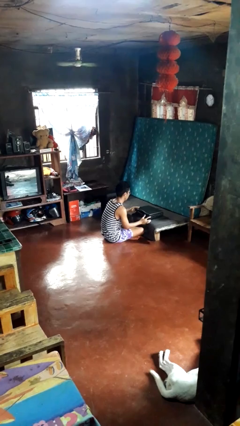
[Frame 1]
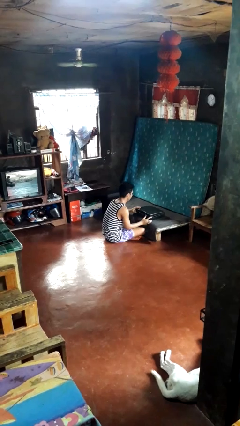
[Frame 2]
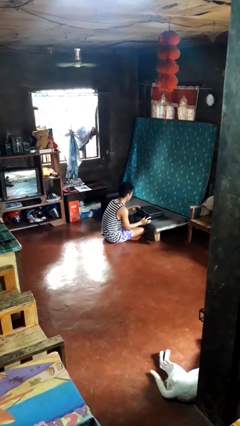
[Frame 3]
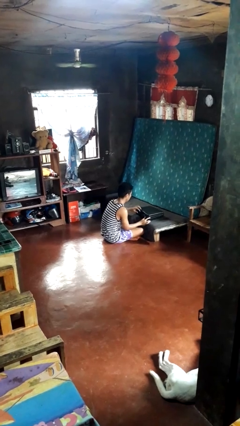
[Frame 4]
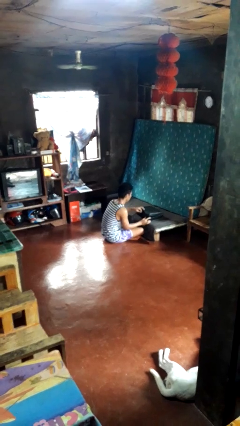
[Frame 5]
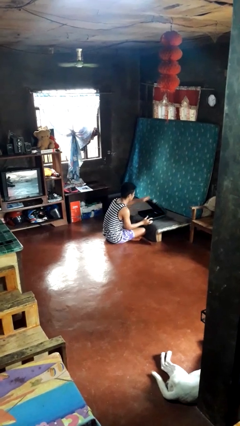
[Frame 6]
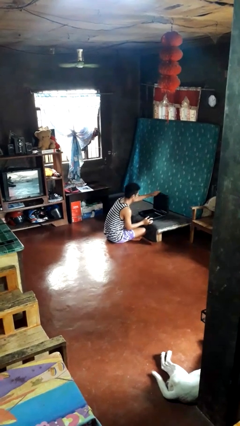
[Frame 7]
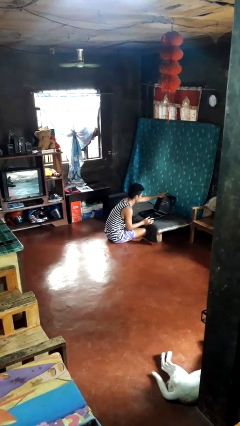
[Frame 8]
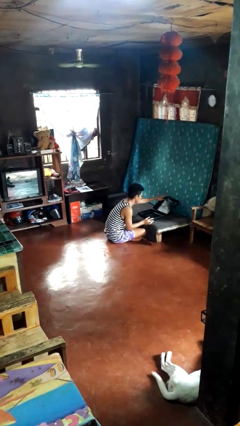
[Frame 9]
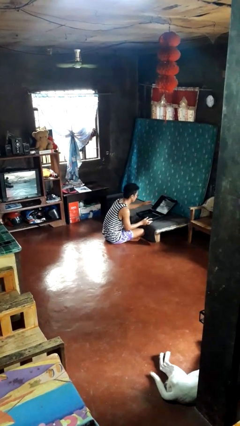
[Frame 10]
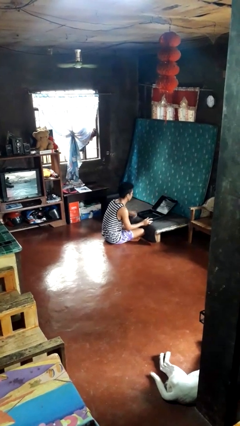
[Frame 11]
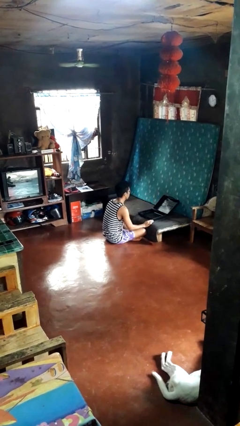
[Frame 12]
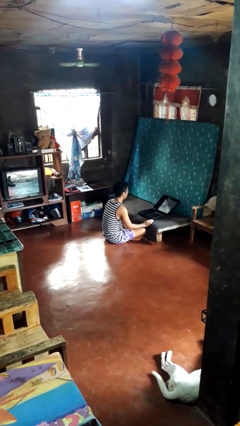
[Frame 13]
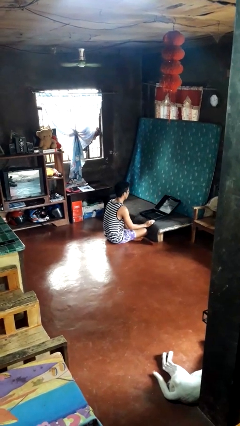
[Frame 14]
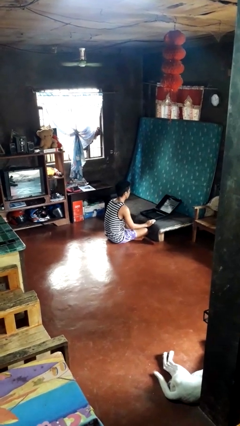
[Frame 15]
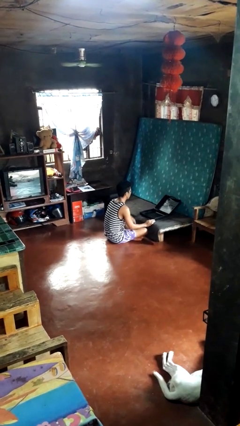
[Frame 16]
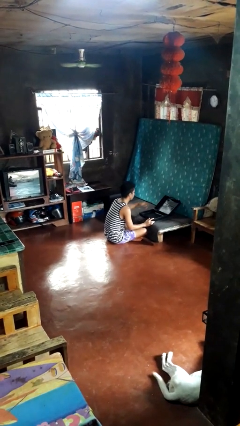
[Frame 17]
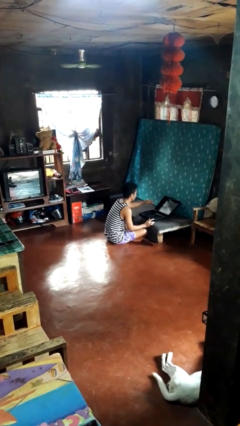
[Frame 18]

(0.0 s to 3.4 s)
person opens suitcase

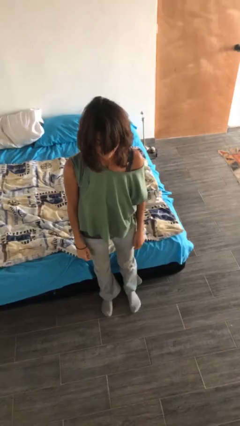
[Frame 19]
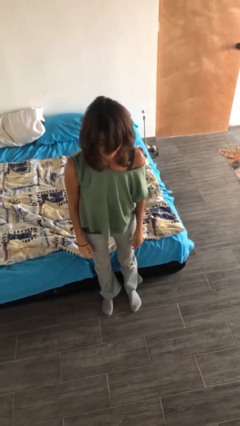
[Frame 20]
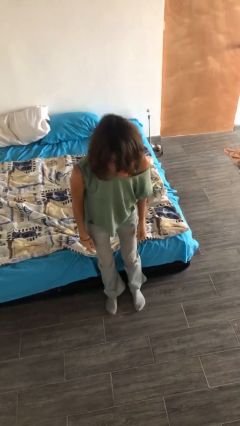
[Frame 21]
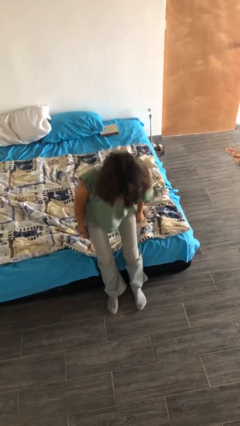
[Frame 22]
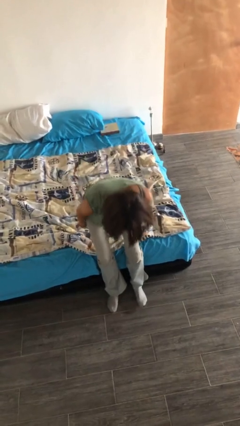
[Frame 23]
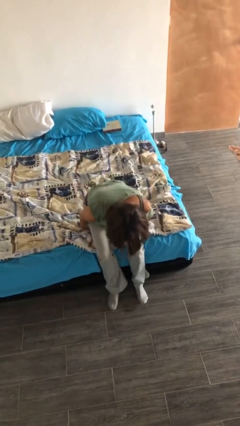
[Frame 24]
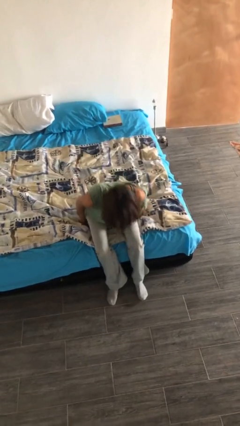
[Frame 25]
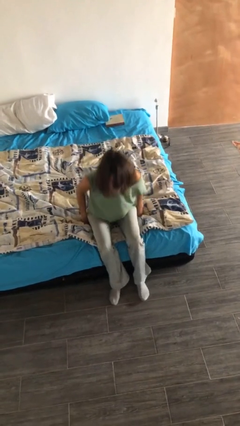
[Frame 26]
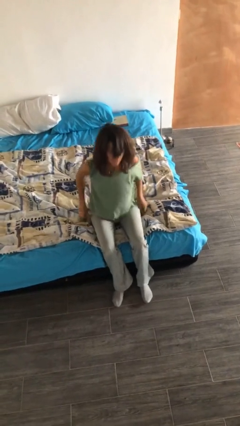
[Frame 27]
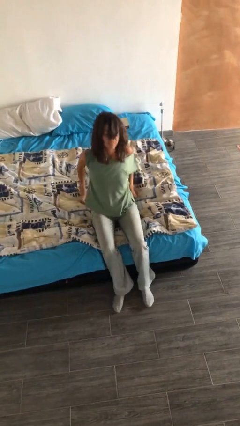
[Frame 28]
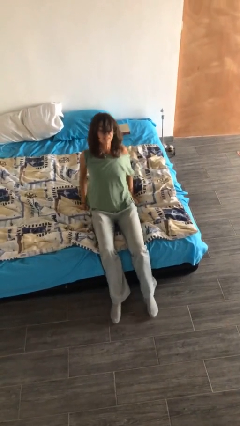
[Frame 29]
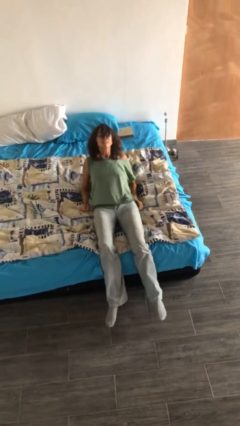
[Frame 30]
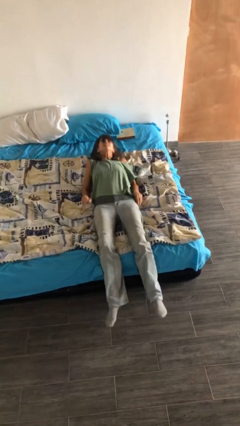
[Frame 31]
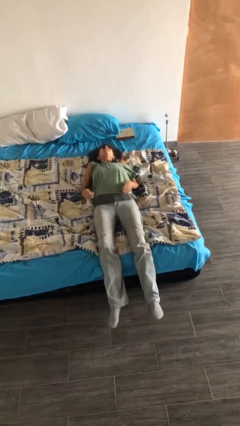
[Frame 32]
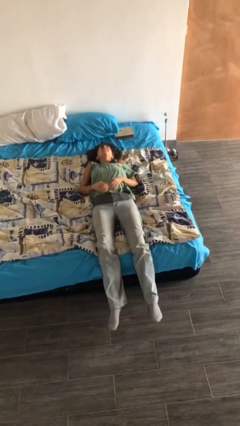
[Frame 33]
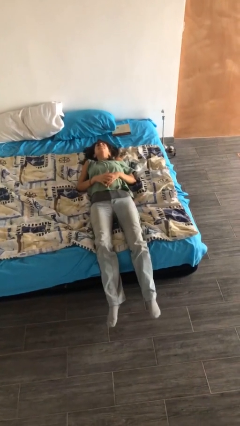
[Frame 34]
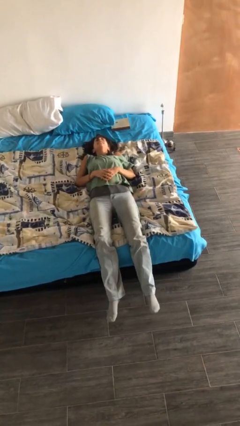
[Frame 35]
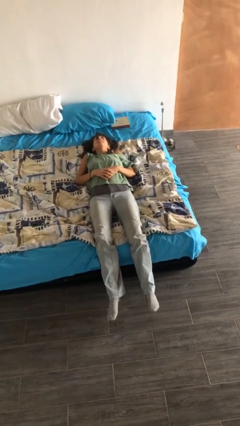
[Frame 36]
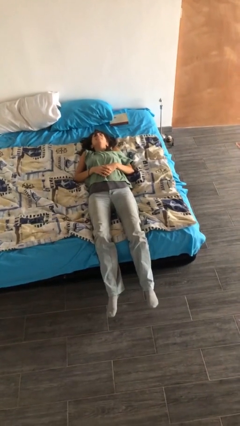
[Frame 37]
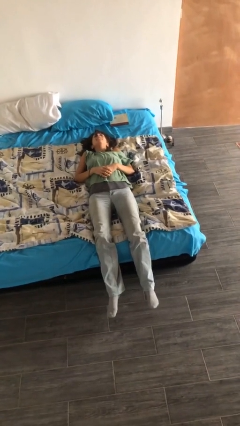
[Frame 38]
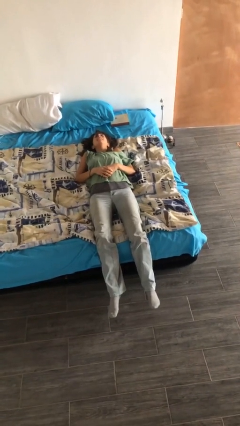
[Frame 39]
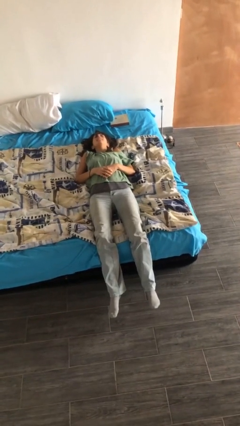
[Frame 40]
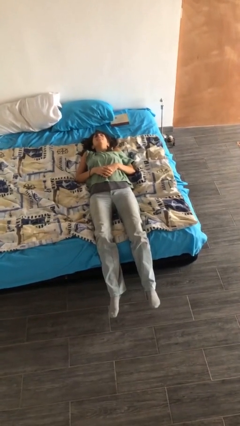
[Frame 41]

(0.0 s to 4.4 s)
person lies down on bed

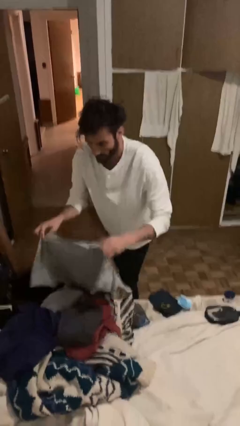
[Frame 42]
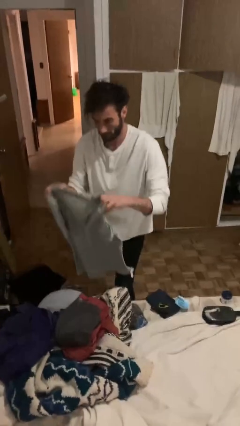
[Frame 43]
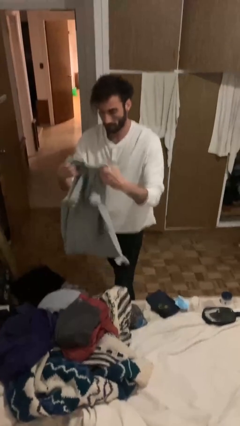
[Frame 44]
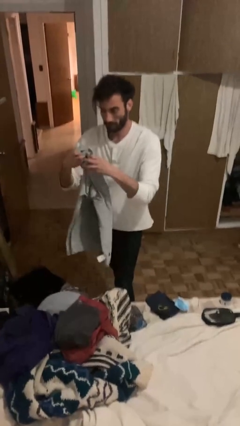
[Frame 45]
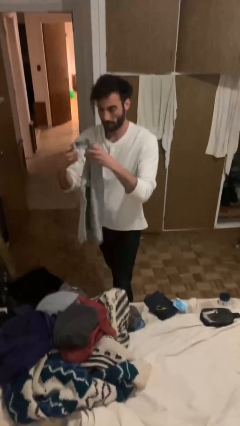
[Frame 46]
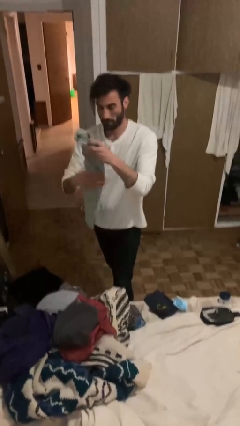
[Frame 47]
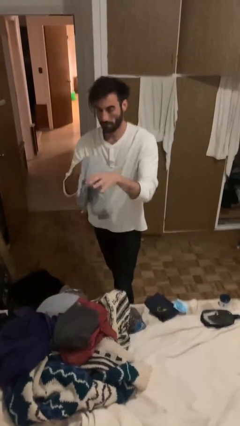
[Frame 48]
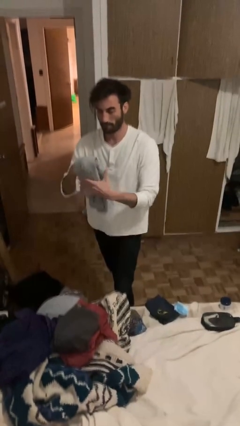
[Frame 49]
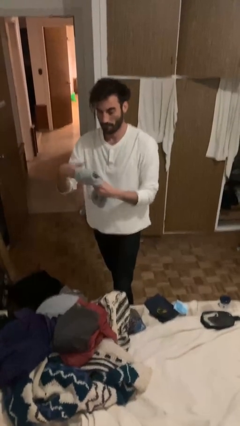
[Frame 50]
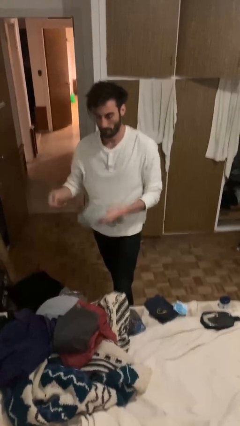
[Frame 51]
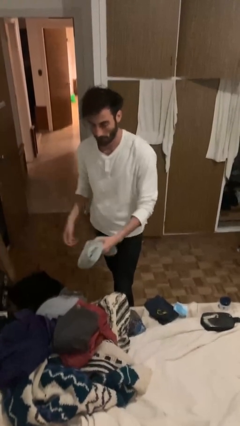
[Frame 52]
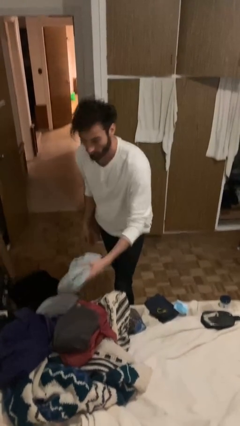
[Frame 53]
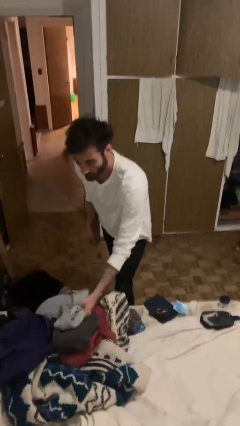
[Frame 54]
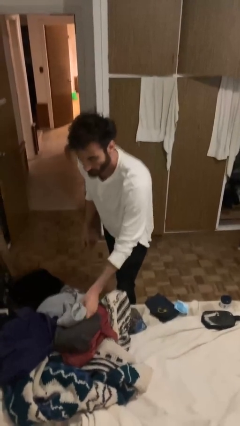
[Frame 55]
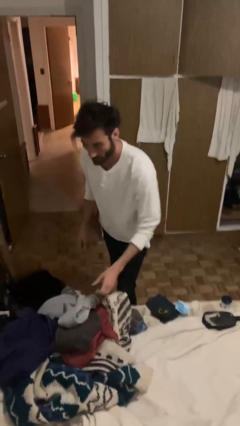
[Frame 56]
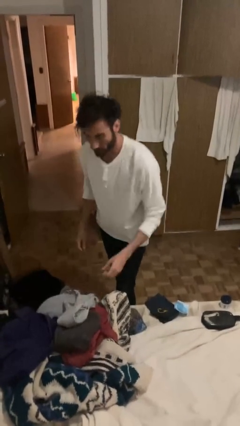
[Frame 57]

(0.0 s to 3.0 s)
person folds shirt

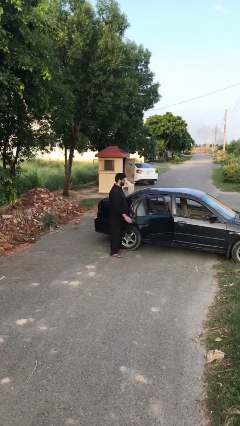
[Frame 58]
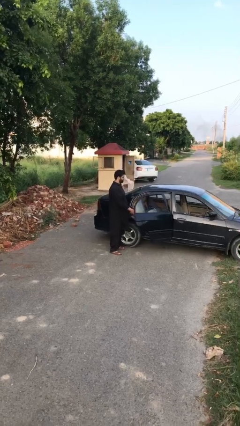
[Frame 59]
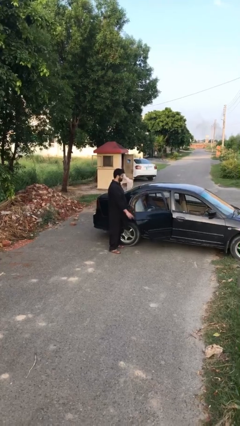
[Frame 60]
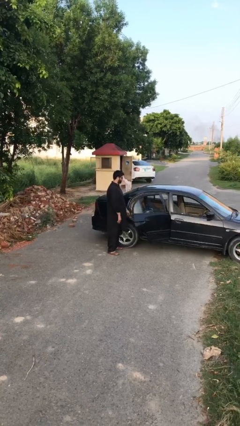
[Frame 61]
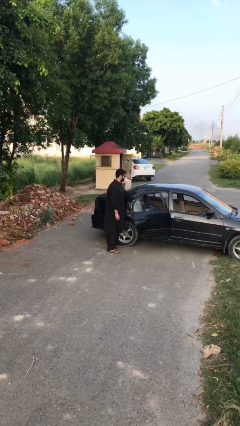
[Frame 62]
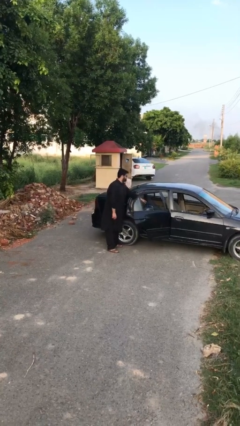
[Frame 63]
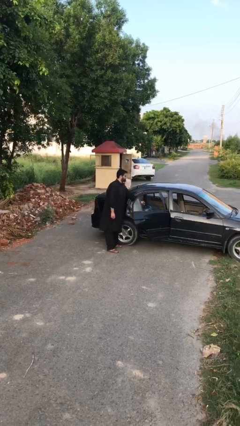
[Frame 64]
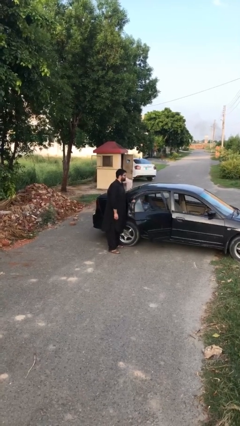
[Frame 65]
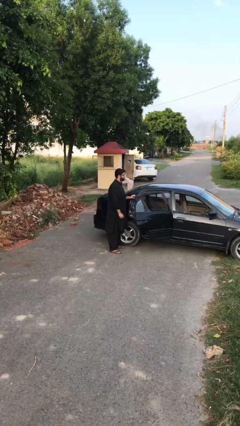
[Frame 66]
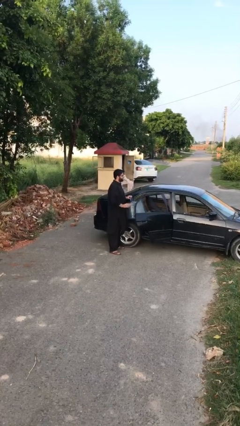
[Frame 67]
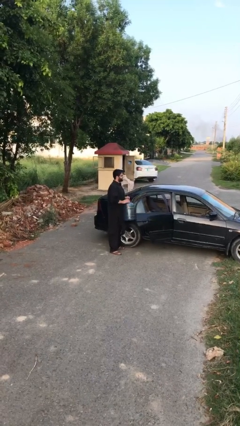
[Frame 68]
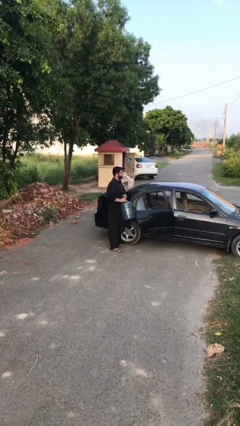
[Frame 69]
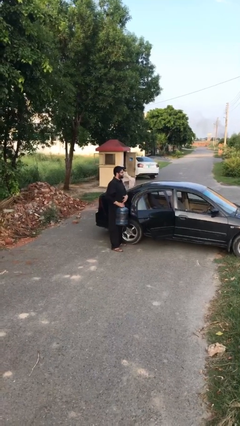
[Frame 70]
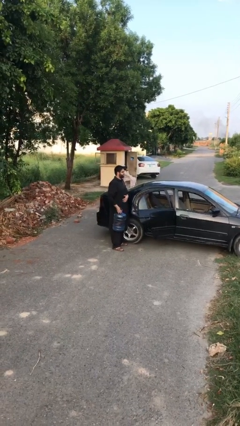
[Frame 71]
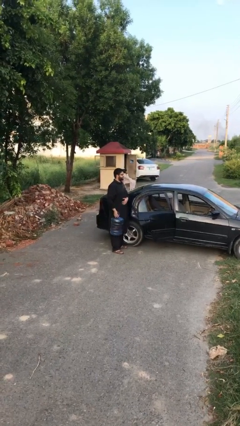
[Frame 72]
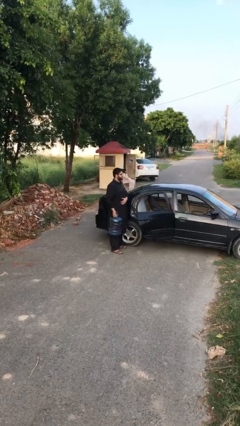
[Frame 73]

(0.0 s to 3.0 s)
person unloads car

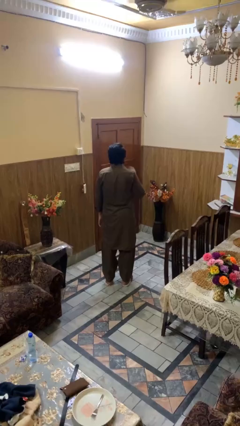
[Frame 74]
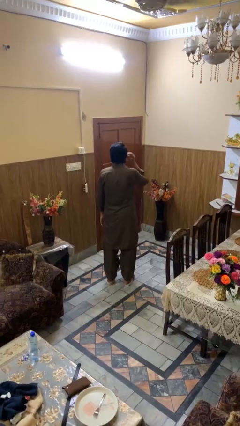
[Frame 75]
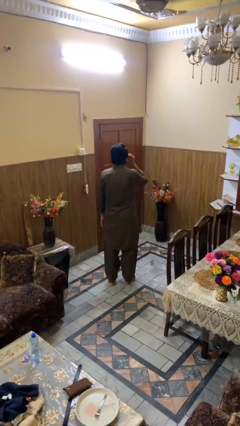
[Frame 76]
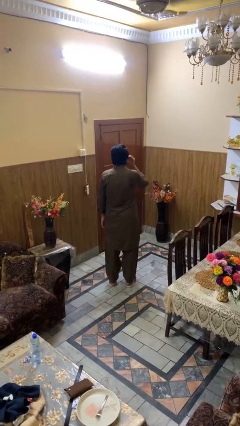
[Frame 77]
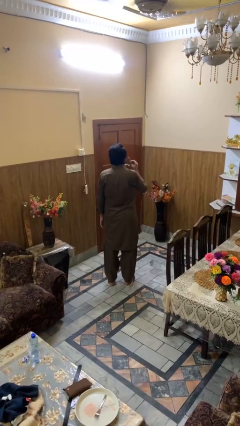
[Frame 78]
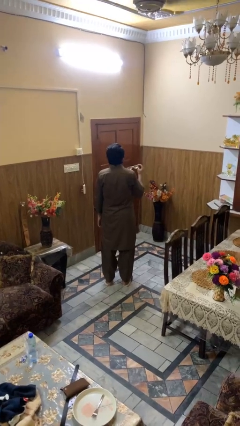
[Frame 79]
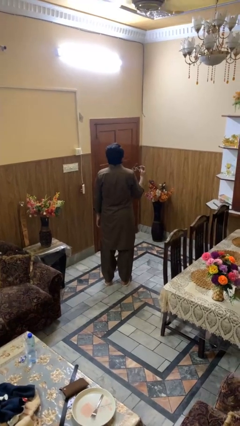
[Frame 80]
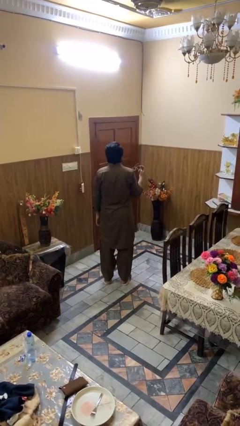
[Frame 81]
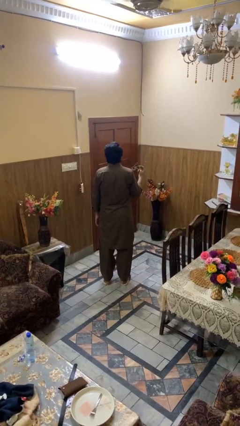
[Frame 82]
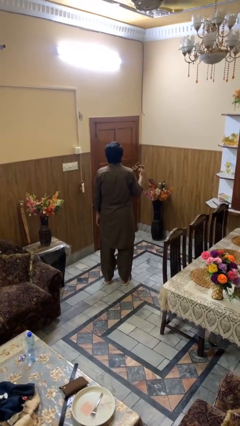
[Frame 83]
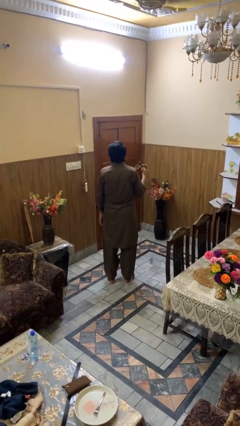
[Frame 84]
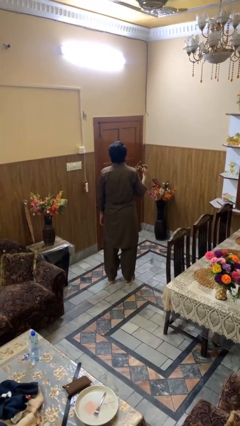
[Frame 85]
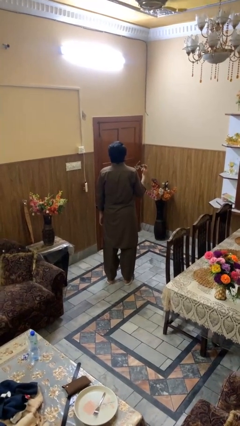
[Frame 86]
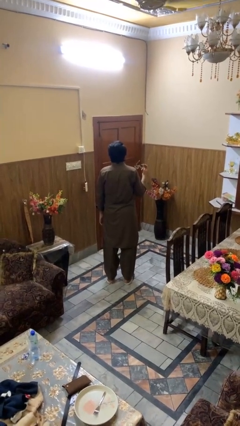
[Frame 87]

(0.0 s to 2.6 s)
person takes off sunglasses

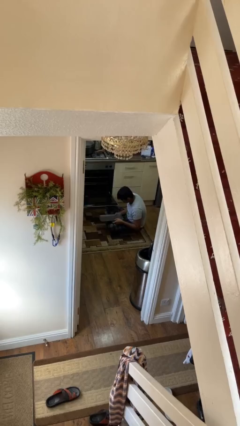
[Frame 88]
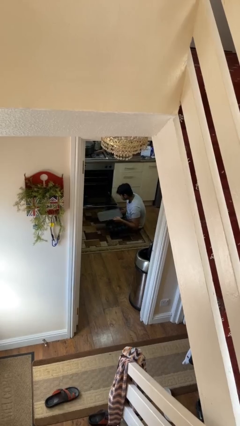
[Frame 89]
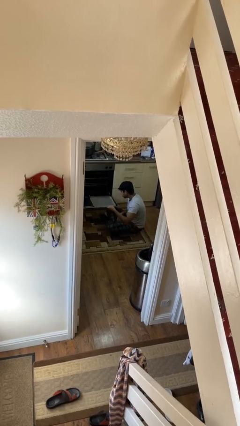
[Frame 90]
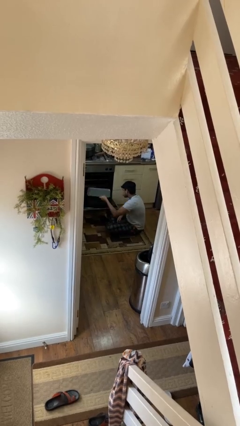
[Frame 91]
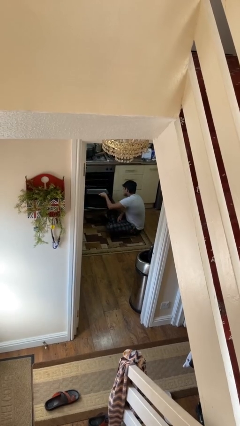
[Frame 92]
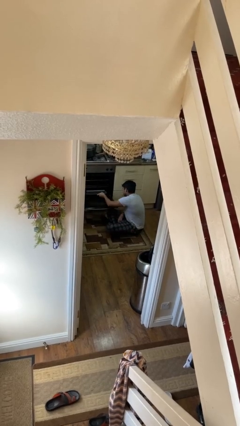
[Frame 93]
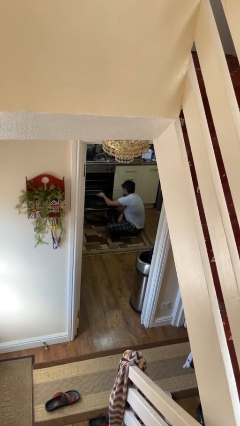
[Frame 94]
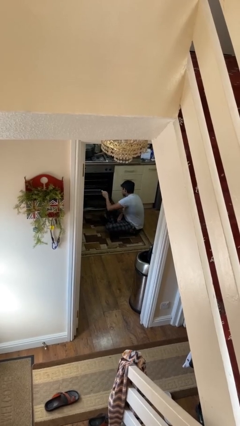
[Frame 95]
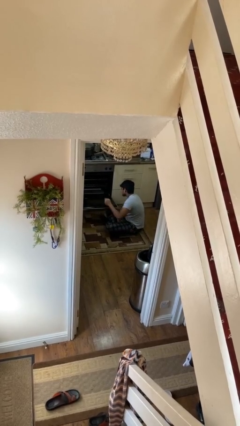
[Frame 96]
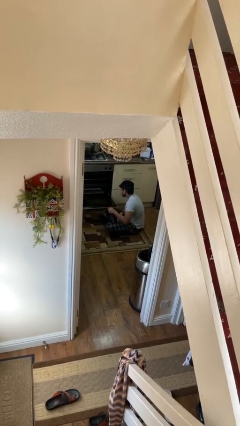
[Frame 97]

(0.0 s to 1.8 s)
person puts object into oven
